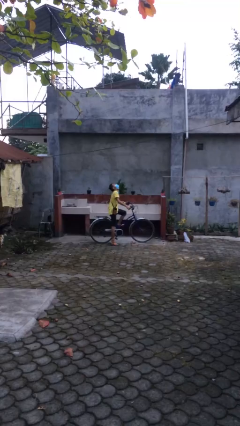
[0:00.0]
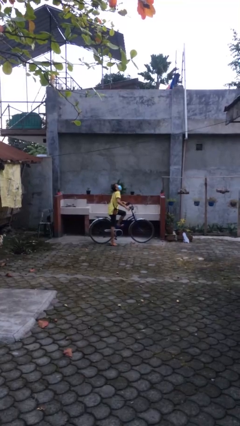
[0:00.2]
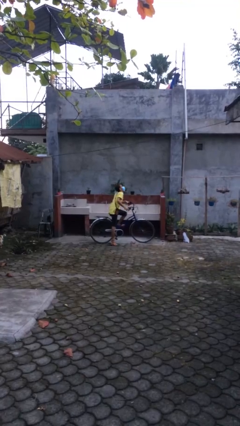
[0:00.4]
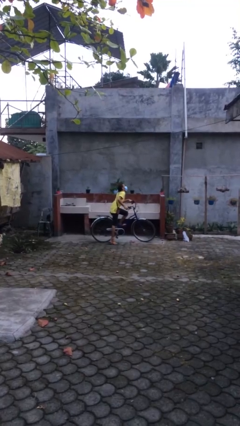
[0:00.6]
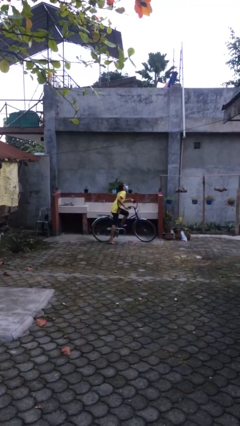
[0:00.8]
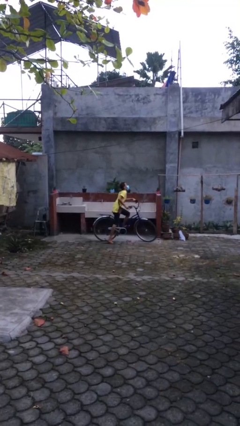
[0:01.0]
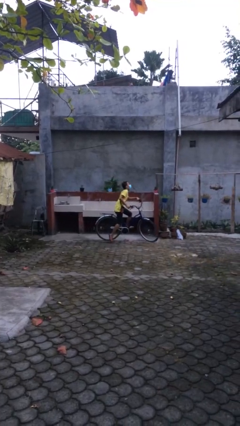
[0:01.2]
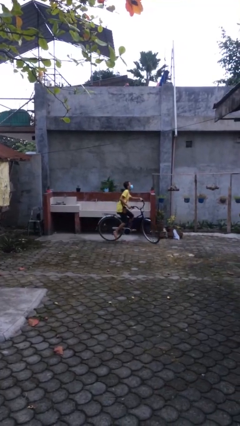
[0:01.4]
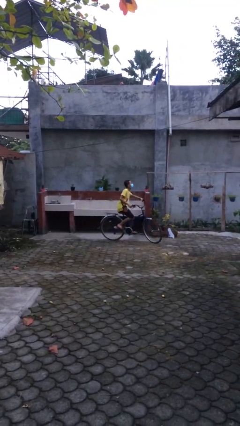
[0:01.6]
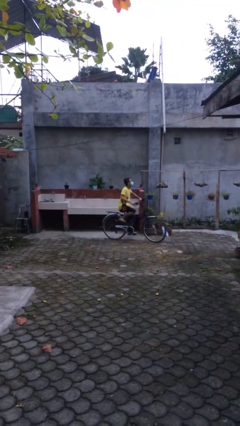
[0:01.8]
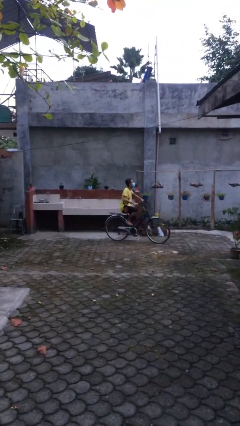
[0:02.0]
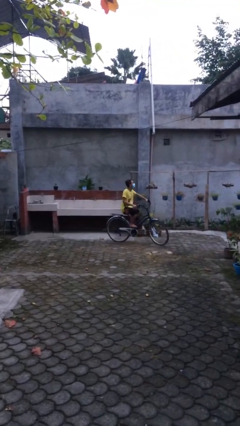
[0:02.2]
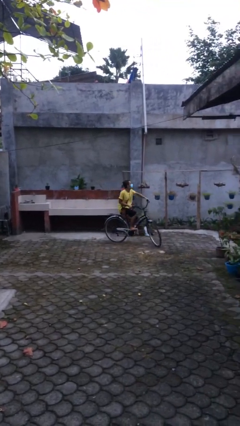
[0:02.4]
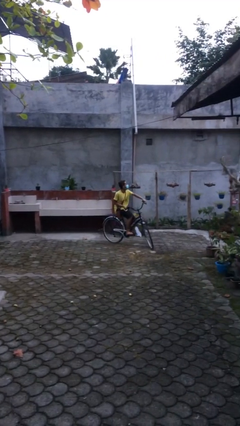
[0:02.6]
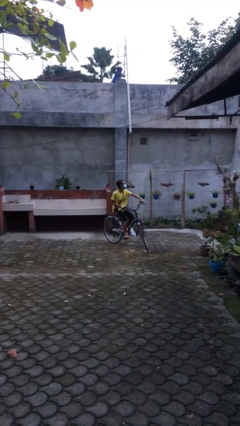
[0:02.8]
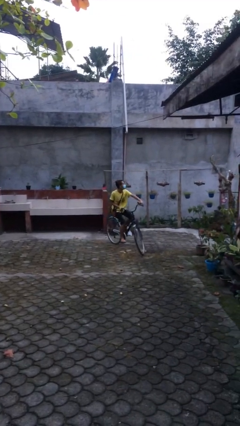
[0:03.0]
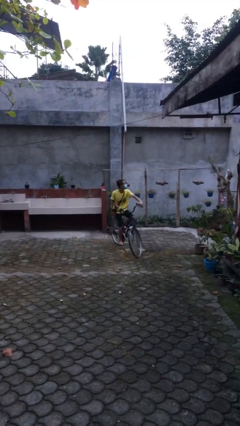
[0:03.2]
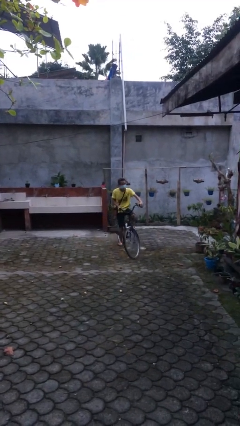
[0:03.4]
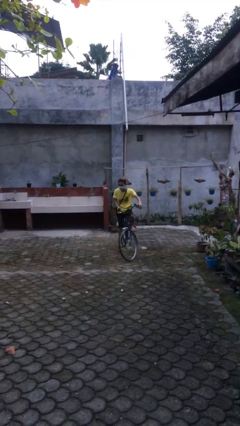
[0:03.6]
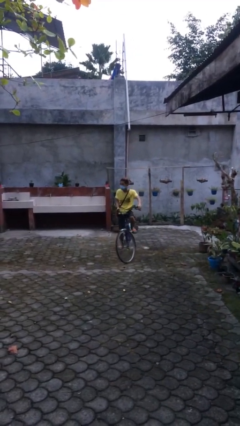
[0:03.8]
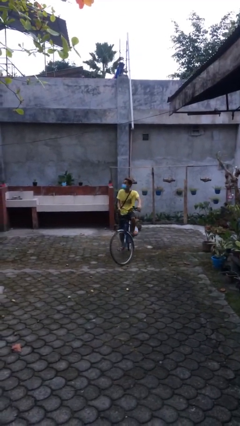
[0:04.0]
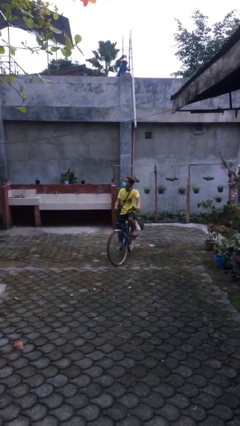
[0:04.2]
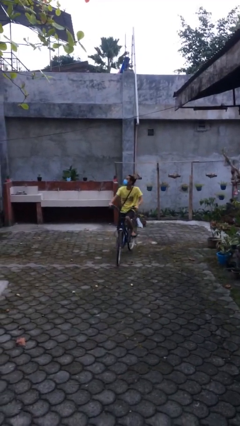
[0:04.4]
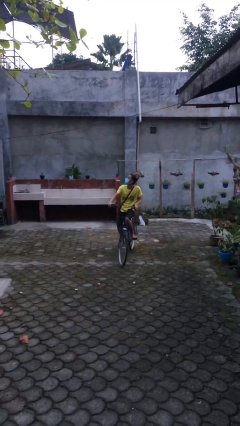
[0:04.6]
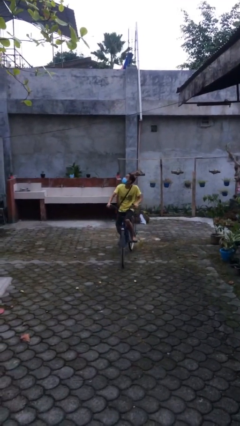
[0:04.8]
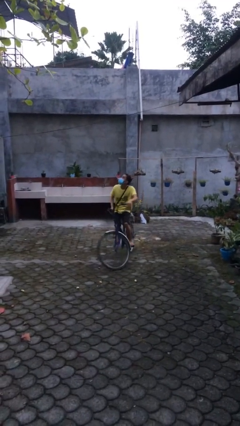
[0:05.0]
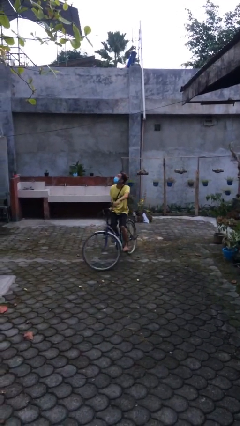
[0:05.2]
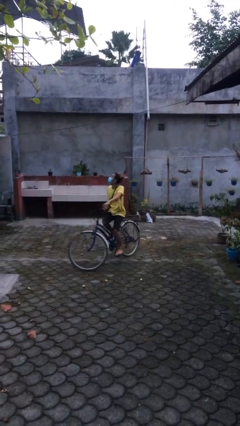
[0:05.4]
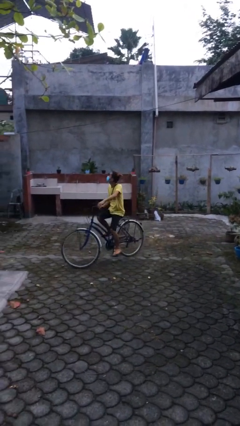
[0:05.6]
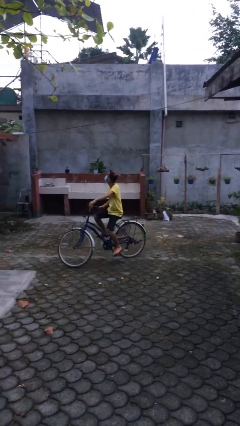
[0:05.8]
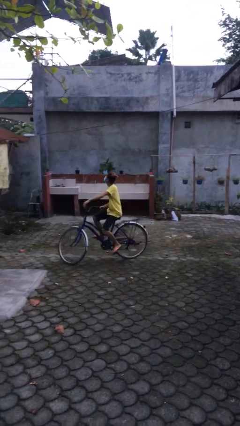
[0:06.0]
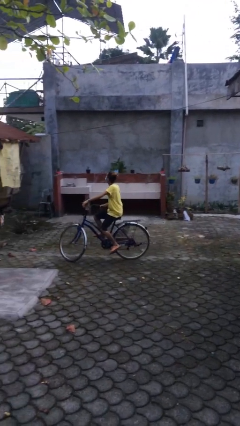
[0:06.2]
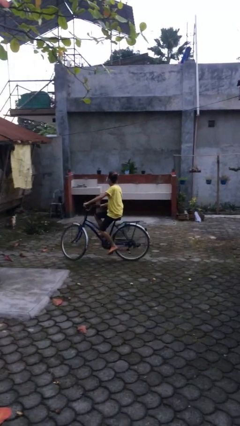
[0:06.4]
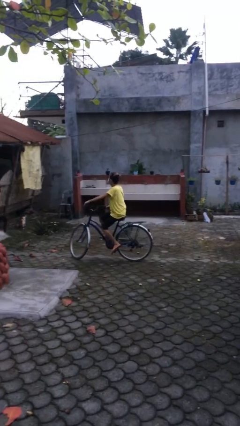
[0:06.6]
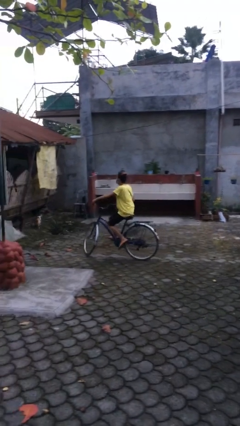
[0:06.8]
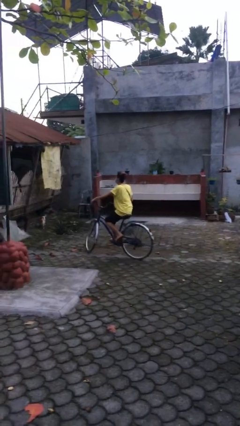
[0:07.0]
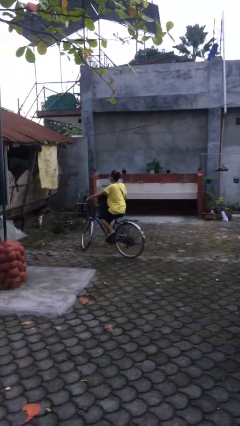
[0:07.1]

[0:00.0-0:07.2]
person rides bicycle

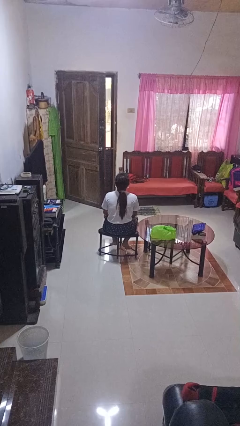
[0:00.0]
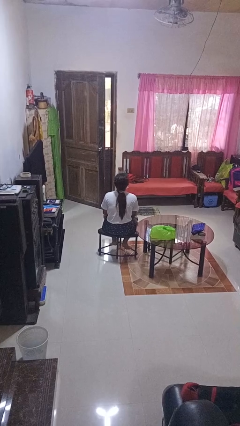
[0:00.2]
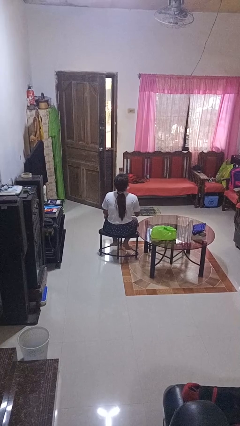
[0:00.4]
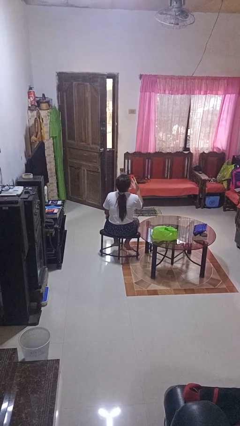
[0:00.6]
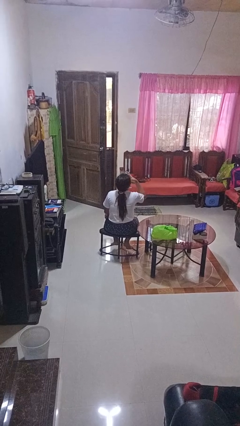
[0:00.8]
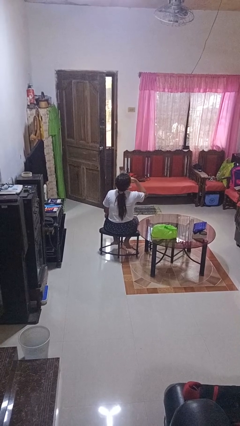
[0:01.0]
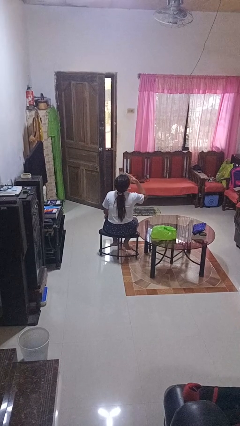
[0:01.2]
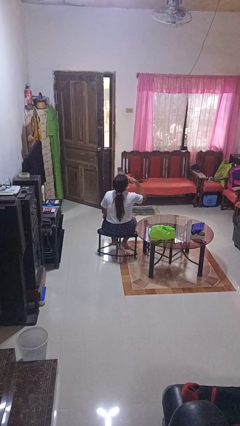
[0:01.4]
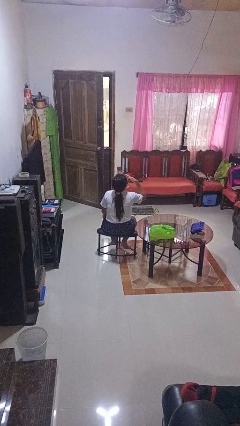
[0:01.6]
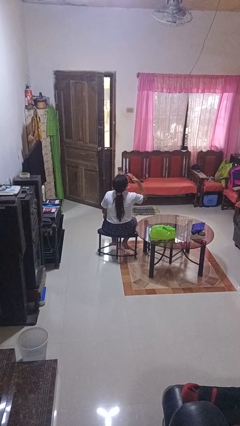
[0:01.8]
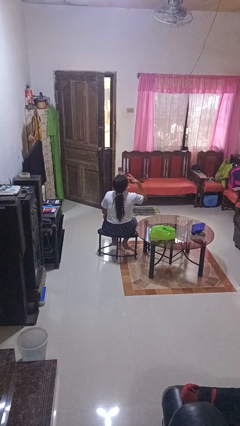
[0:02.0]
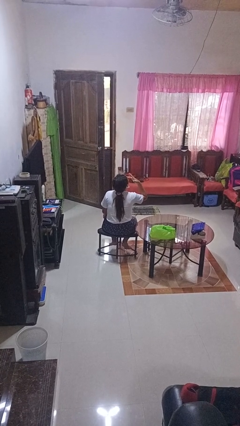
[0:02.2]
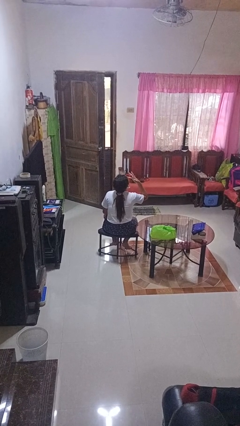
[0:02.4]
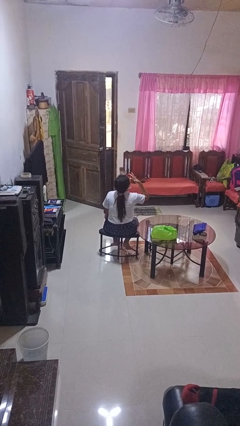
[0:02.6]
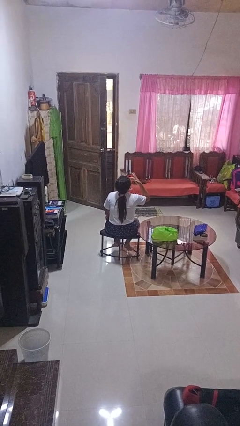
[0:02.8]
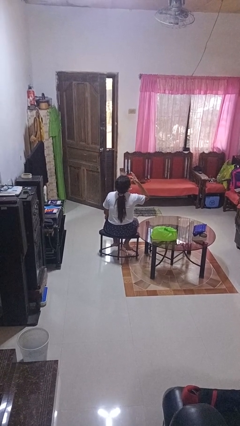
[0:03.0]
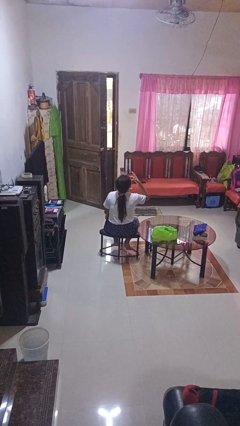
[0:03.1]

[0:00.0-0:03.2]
person licks fingers

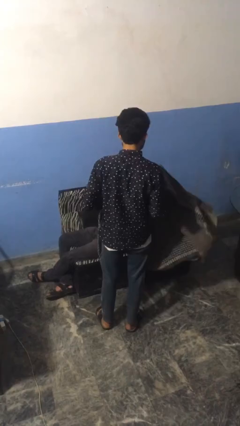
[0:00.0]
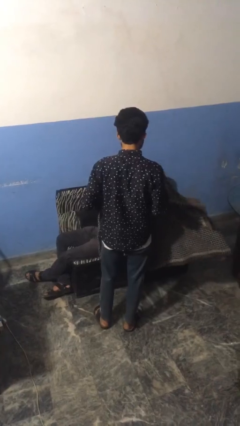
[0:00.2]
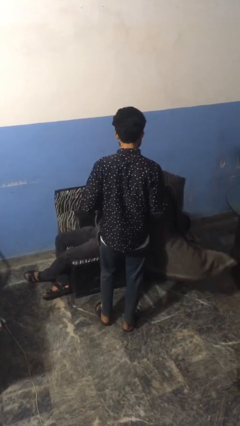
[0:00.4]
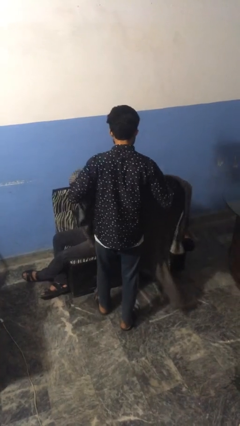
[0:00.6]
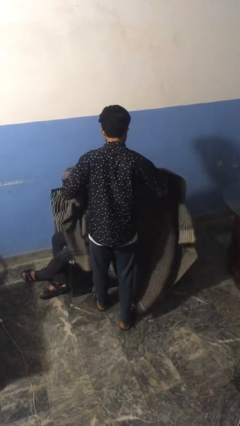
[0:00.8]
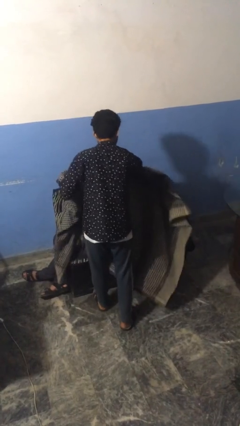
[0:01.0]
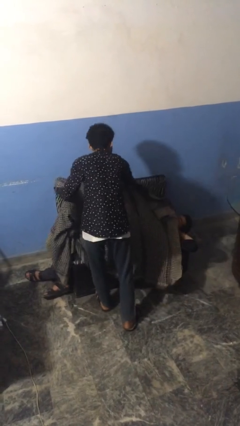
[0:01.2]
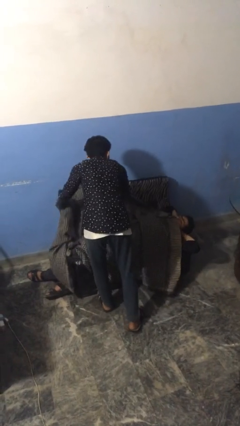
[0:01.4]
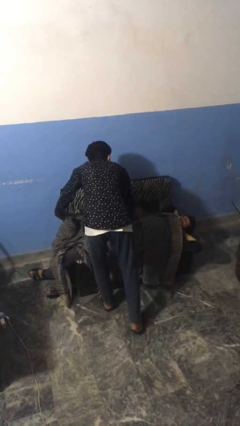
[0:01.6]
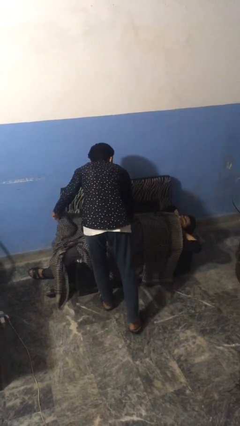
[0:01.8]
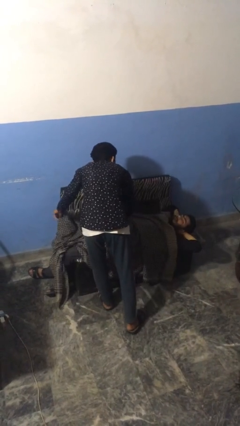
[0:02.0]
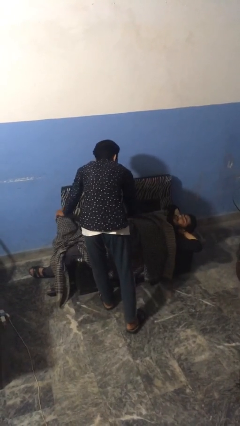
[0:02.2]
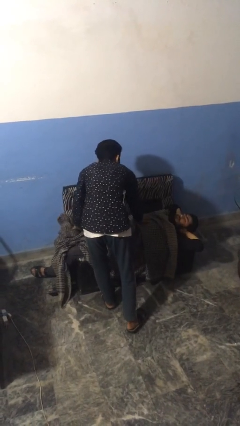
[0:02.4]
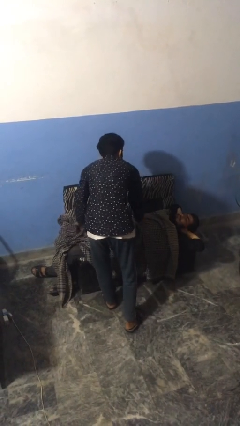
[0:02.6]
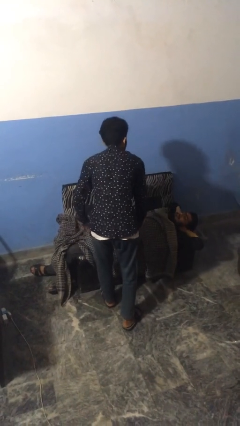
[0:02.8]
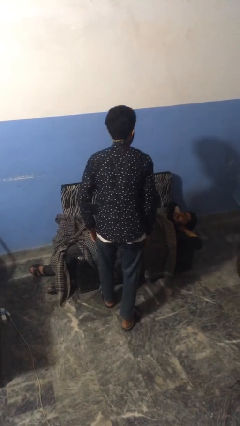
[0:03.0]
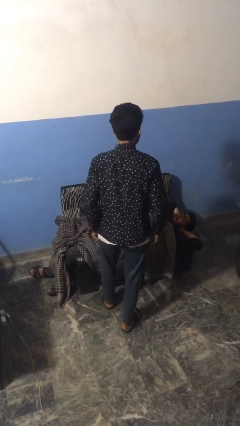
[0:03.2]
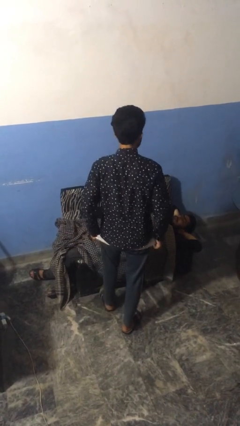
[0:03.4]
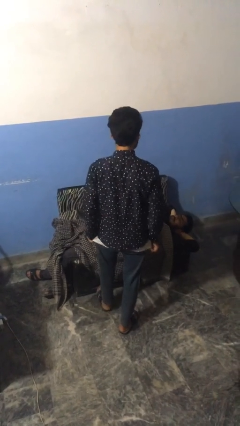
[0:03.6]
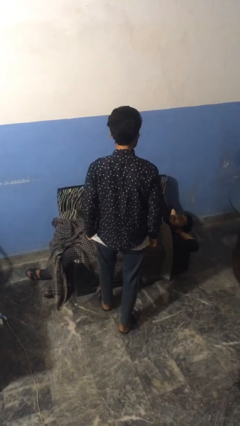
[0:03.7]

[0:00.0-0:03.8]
person covers friend with blanket

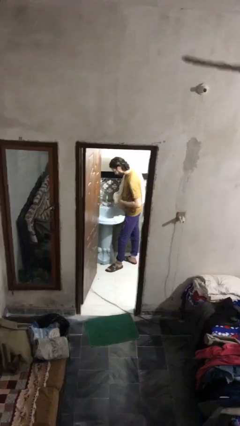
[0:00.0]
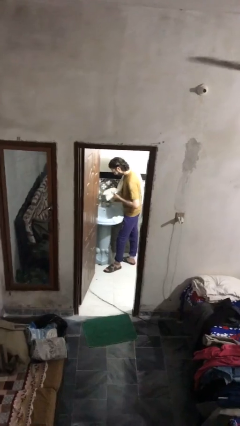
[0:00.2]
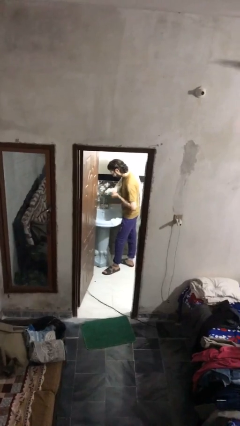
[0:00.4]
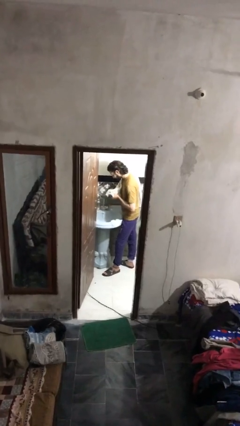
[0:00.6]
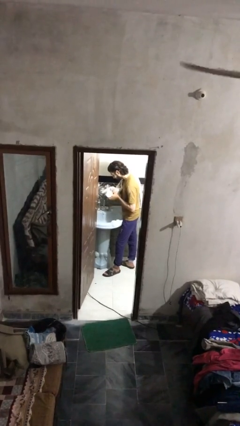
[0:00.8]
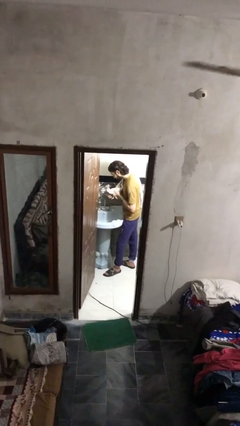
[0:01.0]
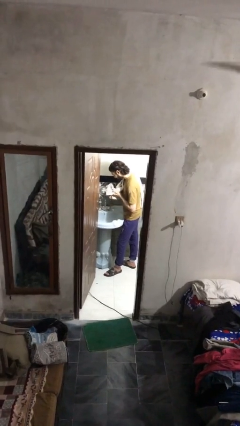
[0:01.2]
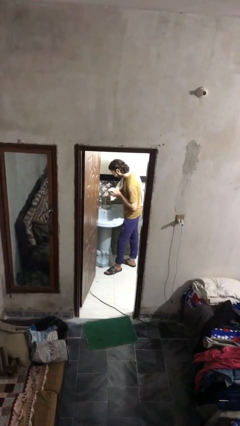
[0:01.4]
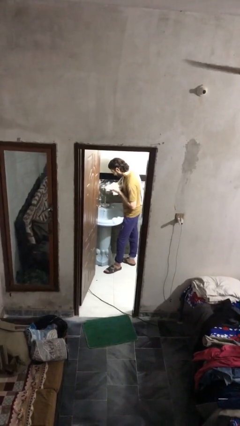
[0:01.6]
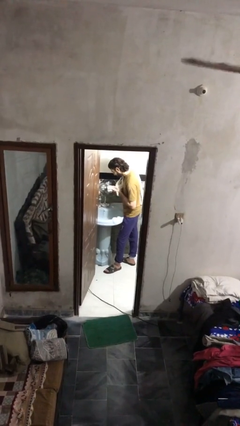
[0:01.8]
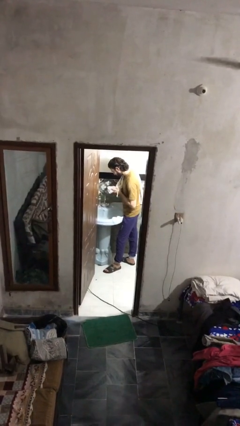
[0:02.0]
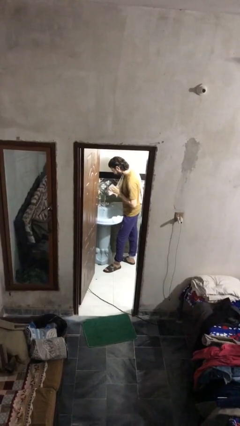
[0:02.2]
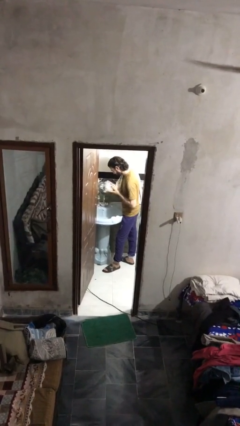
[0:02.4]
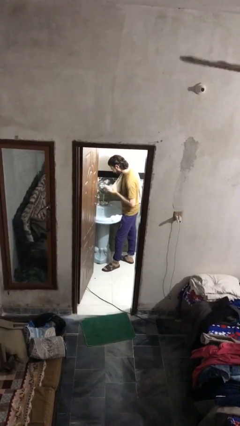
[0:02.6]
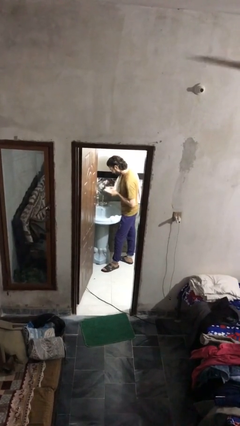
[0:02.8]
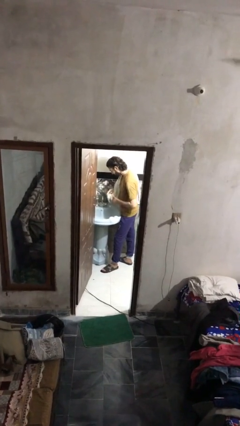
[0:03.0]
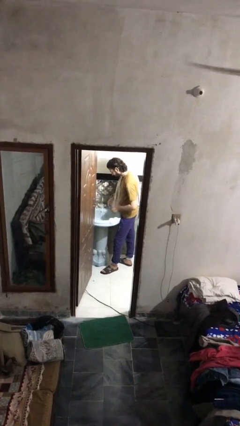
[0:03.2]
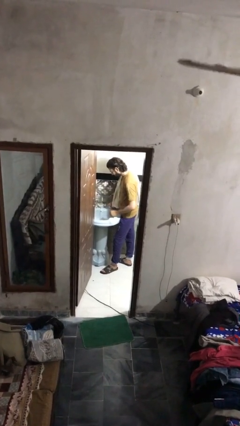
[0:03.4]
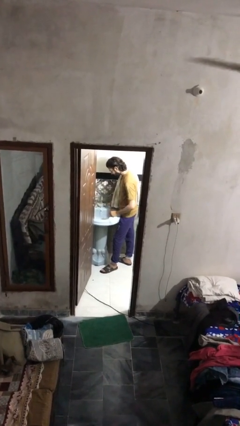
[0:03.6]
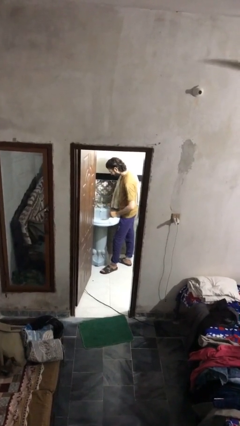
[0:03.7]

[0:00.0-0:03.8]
person dries hands with towel
